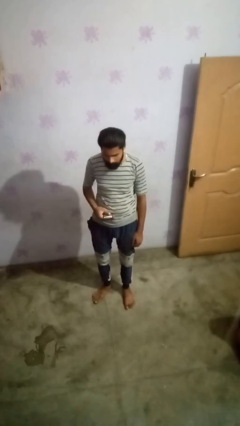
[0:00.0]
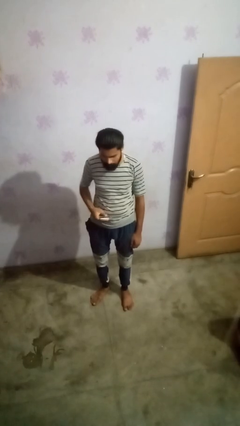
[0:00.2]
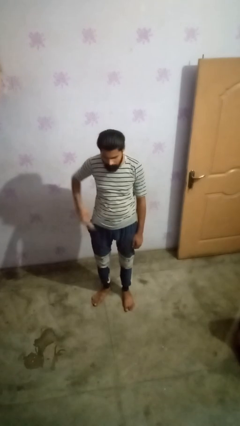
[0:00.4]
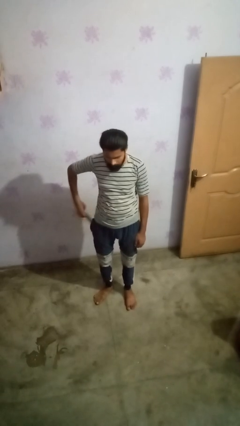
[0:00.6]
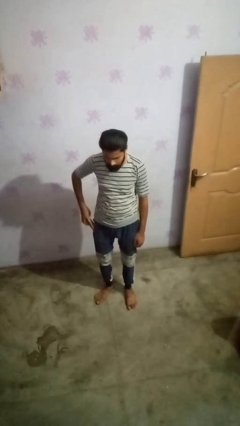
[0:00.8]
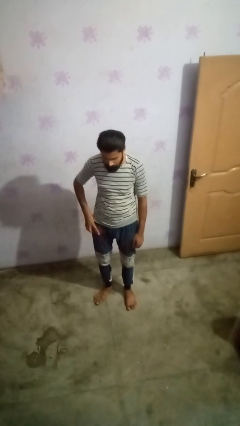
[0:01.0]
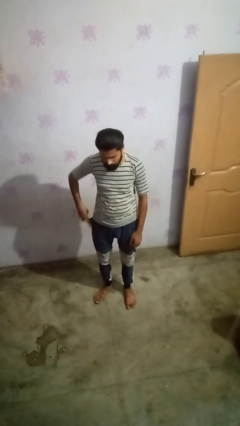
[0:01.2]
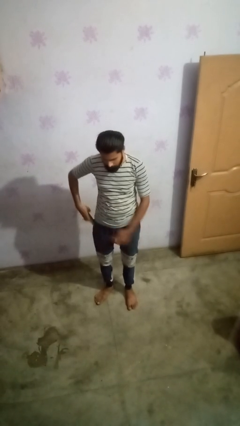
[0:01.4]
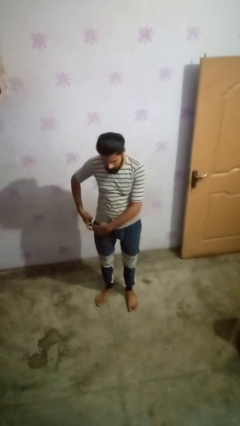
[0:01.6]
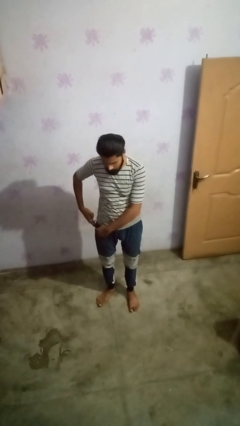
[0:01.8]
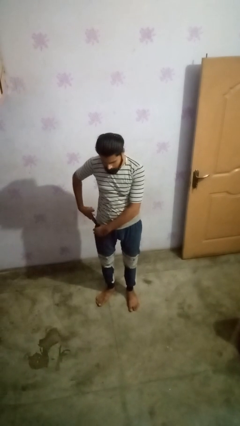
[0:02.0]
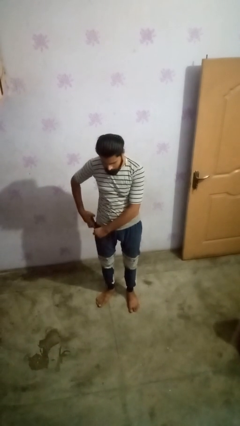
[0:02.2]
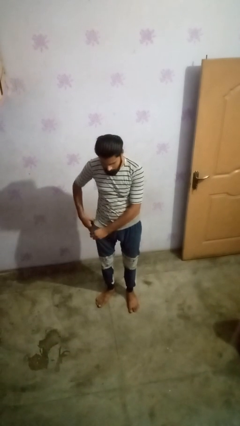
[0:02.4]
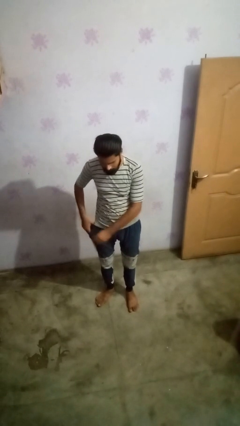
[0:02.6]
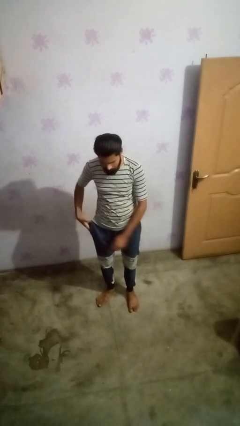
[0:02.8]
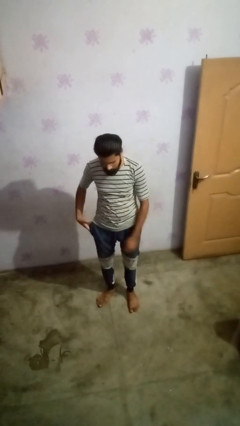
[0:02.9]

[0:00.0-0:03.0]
person puts phone into pocket

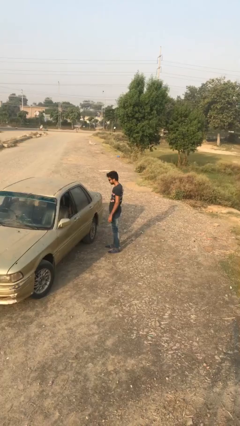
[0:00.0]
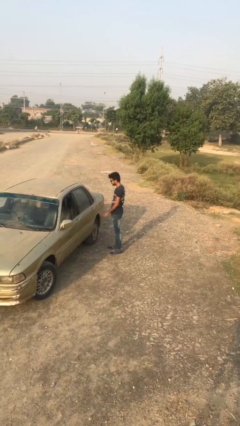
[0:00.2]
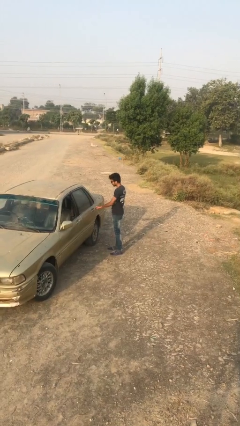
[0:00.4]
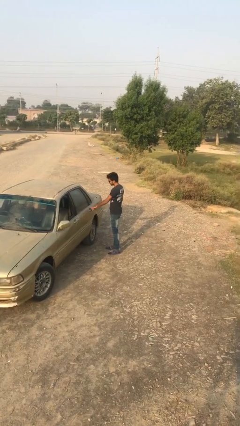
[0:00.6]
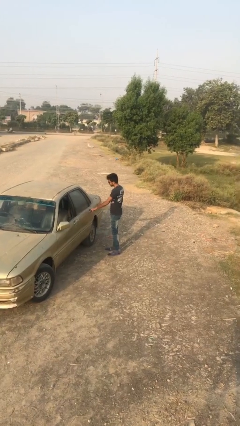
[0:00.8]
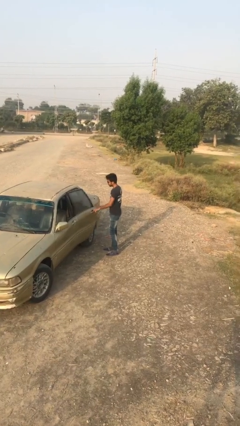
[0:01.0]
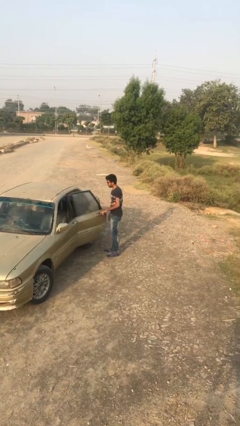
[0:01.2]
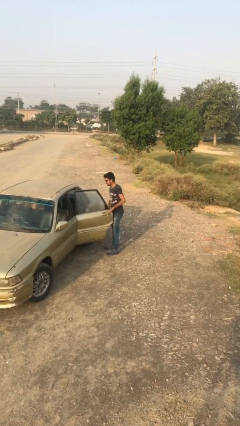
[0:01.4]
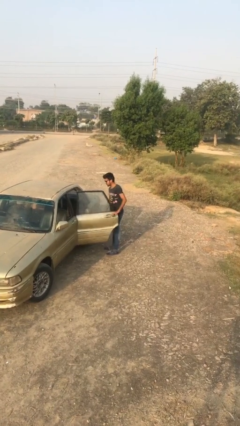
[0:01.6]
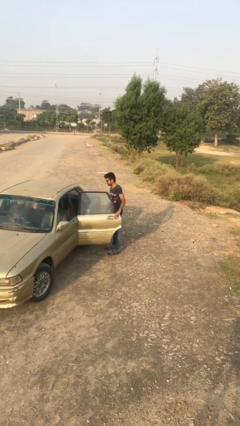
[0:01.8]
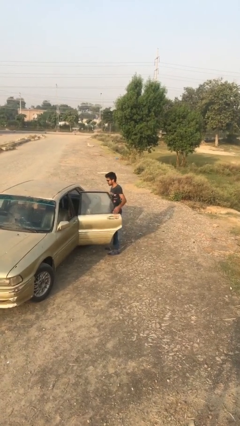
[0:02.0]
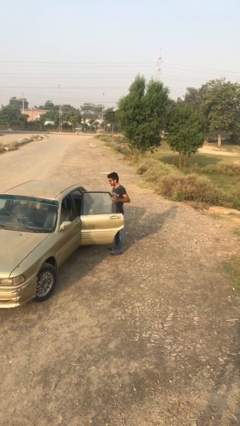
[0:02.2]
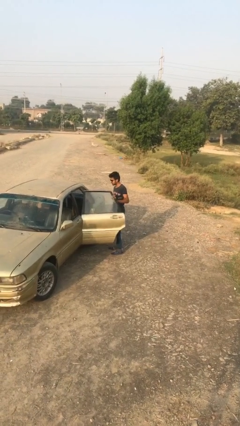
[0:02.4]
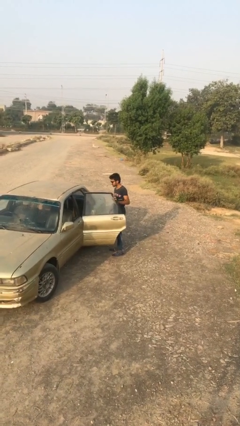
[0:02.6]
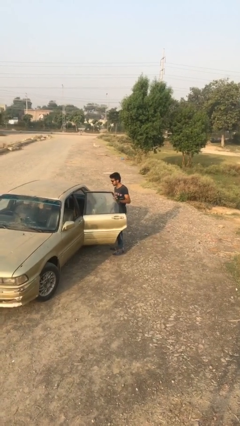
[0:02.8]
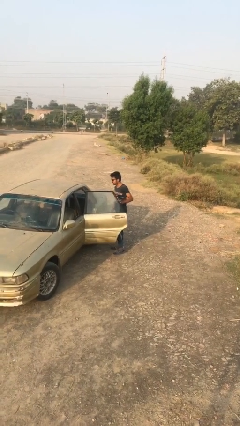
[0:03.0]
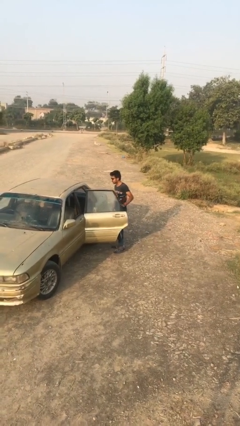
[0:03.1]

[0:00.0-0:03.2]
person opens car door

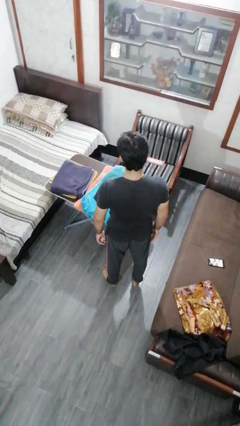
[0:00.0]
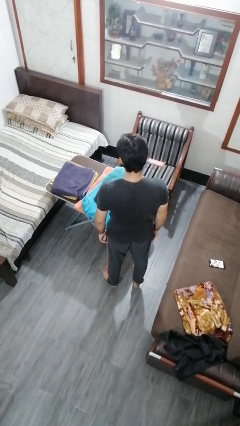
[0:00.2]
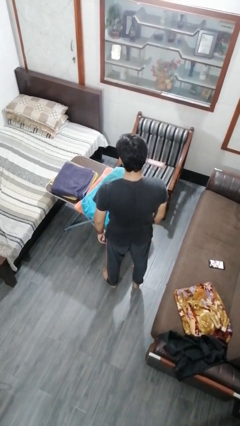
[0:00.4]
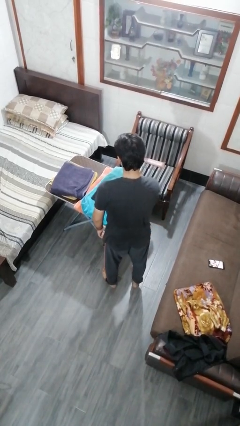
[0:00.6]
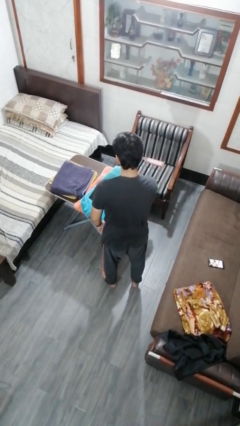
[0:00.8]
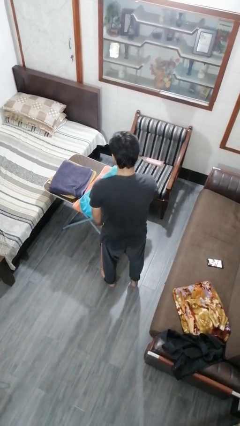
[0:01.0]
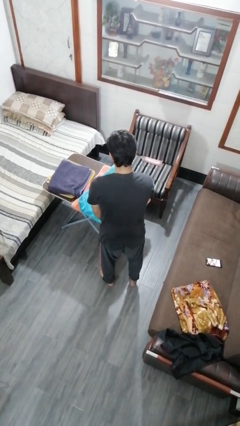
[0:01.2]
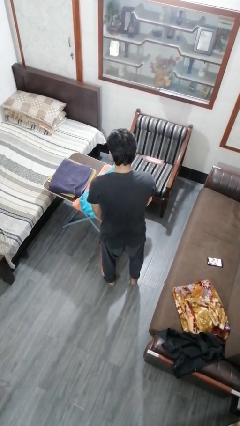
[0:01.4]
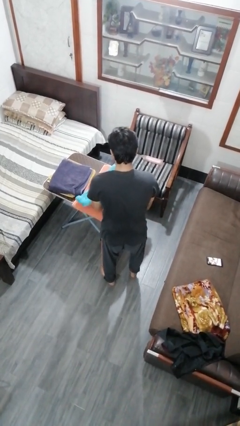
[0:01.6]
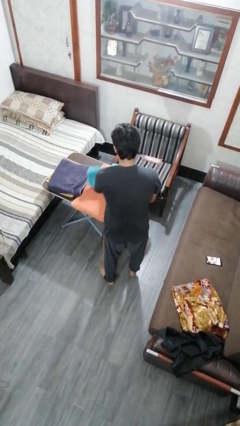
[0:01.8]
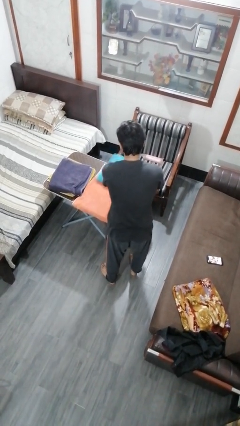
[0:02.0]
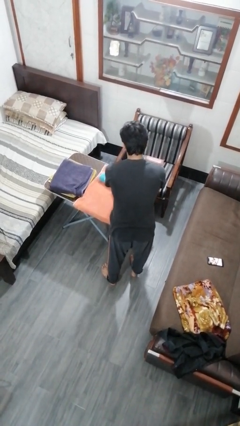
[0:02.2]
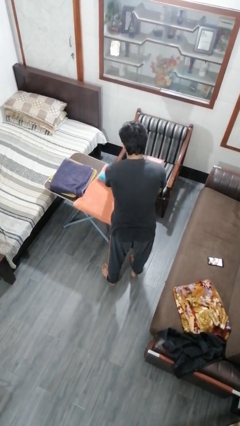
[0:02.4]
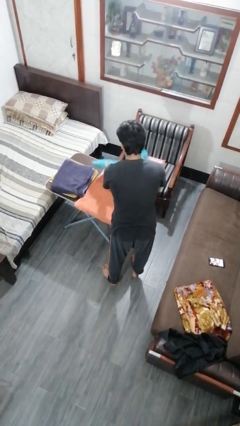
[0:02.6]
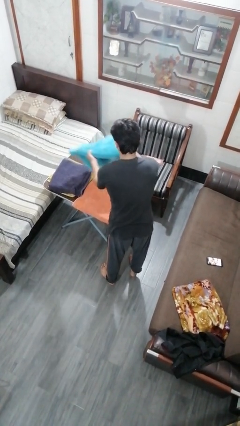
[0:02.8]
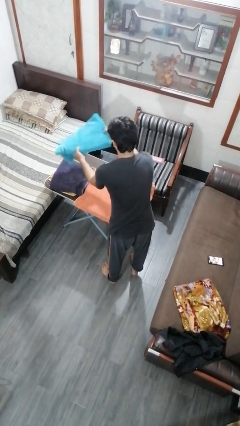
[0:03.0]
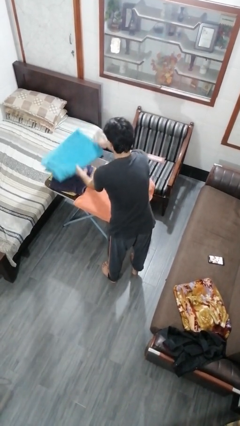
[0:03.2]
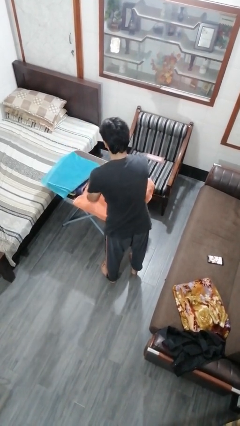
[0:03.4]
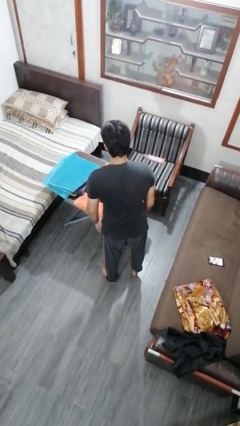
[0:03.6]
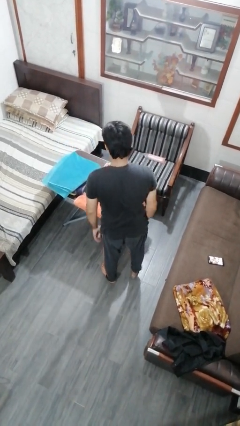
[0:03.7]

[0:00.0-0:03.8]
person folds towel

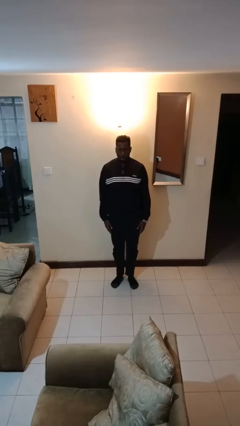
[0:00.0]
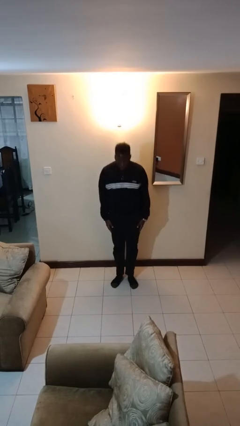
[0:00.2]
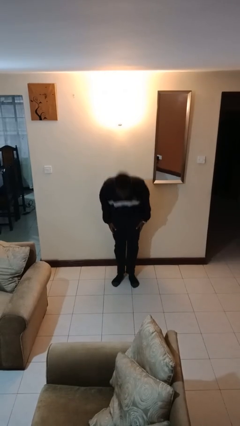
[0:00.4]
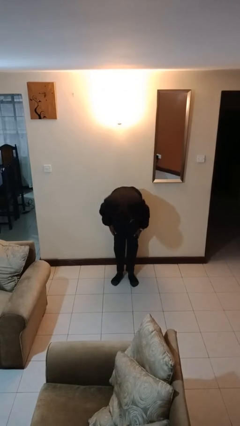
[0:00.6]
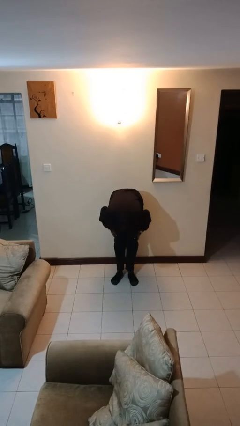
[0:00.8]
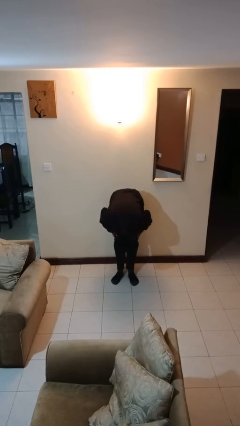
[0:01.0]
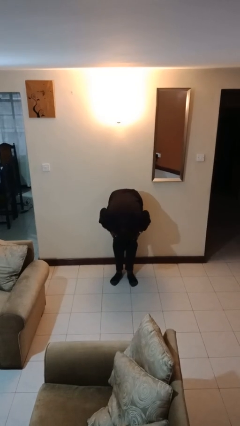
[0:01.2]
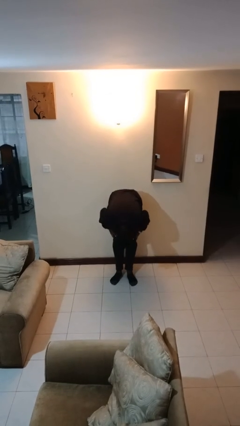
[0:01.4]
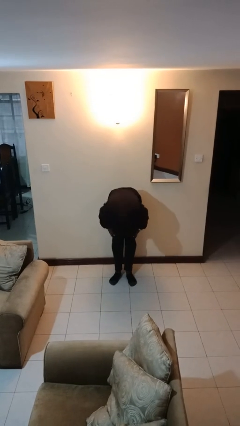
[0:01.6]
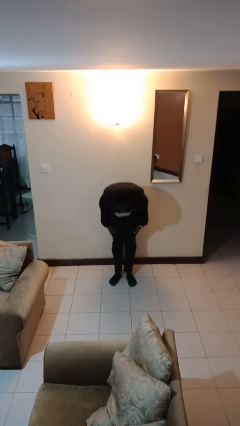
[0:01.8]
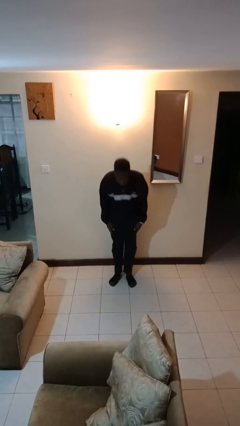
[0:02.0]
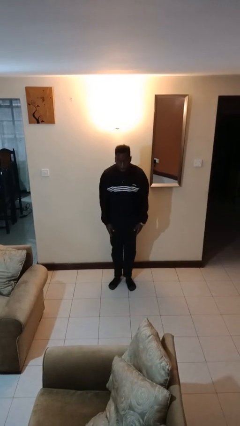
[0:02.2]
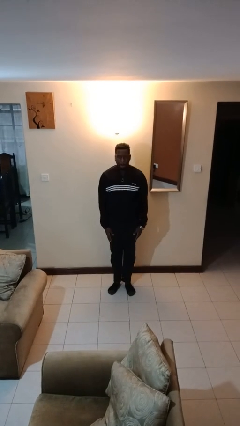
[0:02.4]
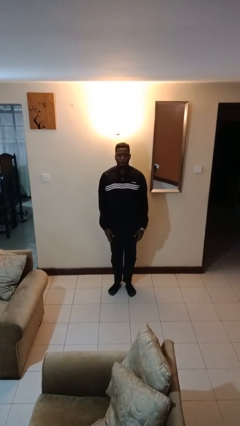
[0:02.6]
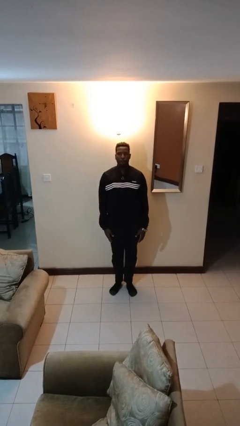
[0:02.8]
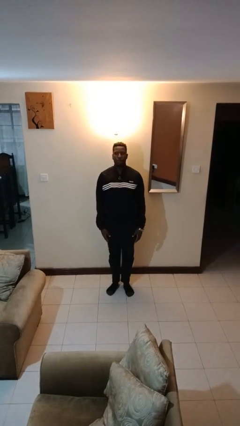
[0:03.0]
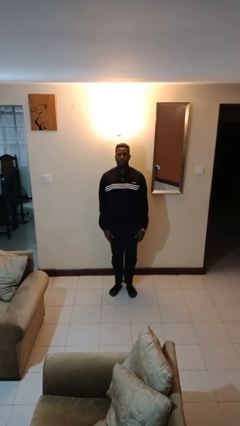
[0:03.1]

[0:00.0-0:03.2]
person bows

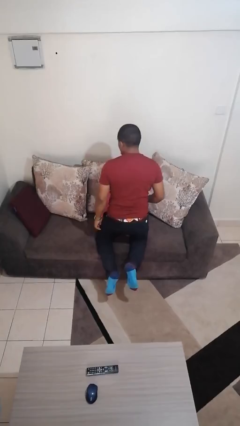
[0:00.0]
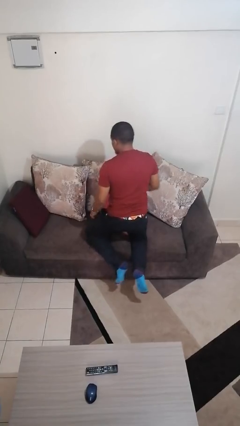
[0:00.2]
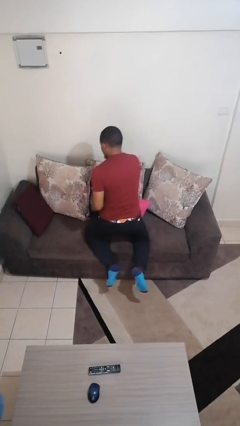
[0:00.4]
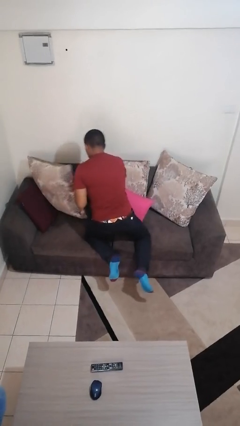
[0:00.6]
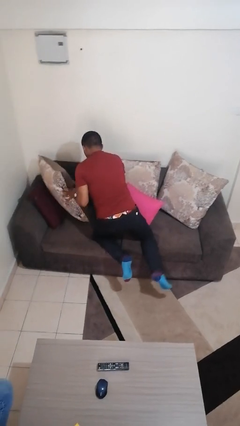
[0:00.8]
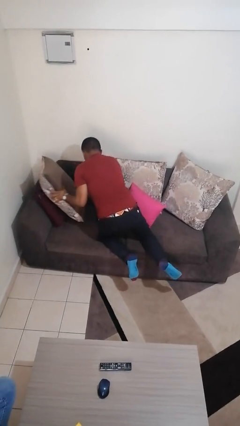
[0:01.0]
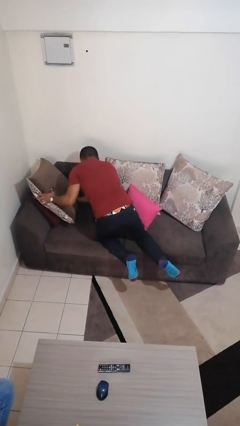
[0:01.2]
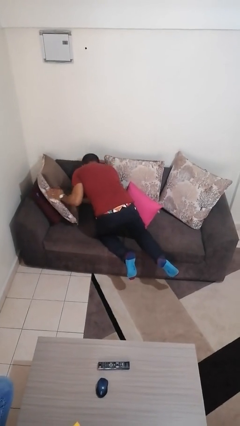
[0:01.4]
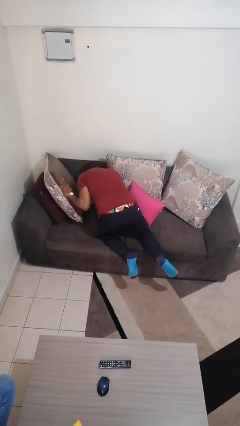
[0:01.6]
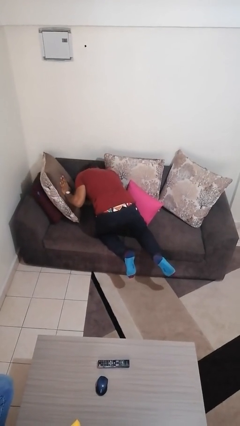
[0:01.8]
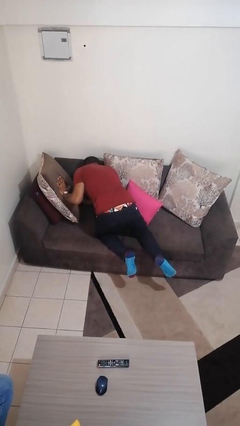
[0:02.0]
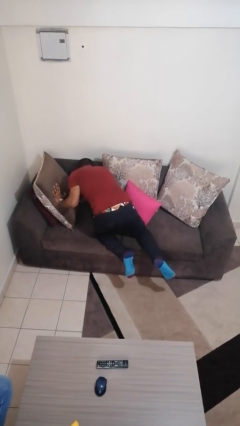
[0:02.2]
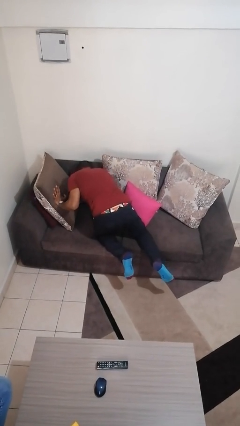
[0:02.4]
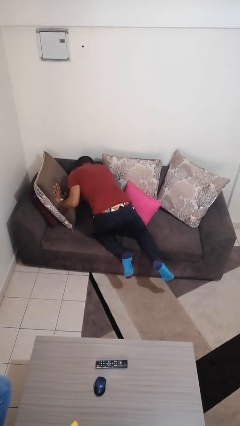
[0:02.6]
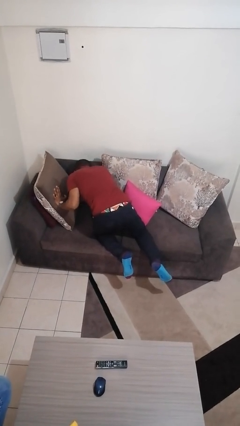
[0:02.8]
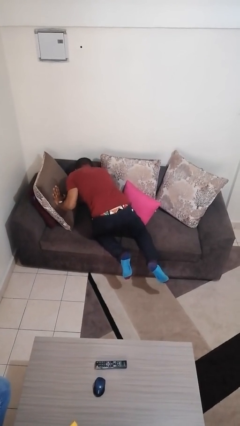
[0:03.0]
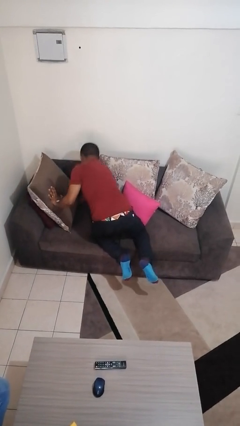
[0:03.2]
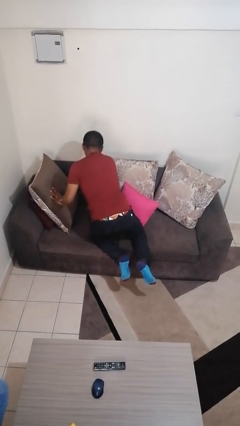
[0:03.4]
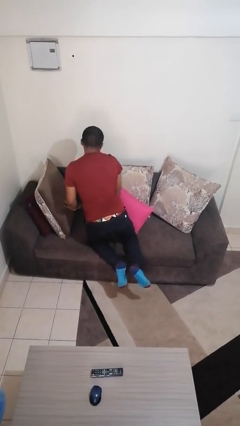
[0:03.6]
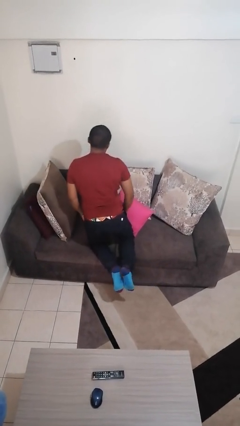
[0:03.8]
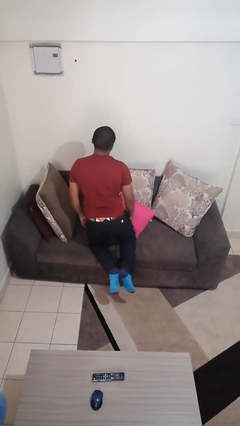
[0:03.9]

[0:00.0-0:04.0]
person searches in couch

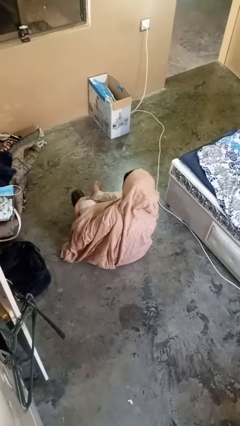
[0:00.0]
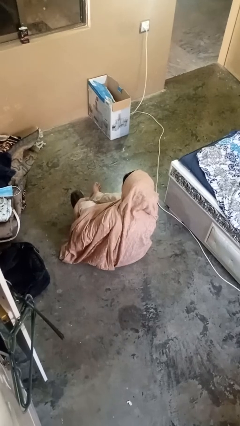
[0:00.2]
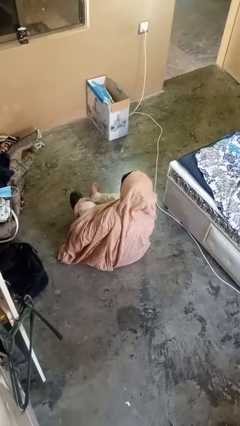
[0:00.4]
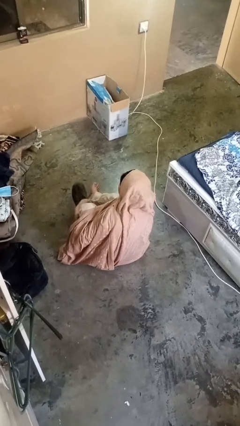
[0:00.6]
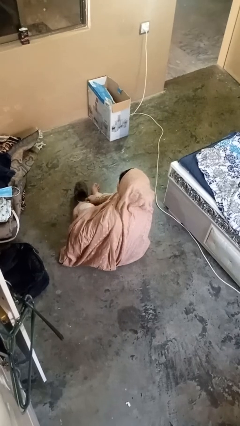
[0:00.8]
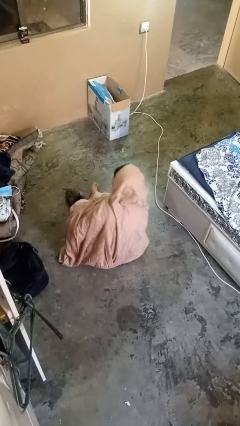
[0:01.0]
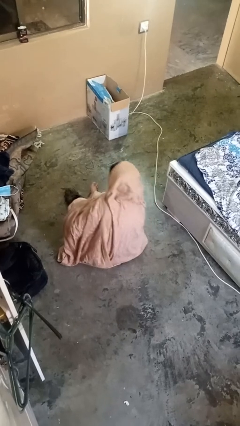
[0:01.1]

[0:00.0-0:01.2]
person takes off shoes
